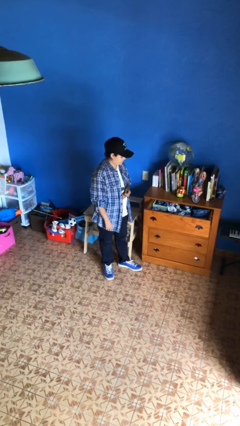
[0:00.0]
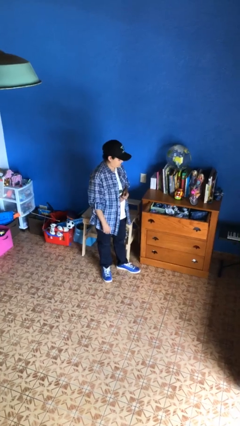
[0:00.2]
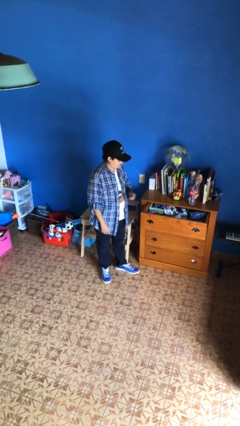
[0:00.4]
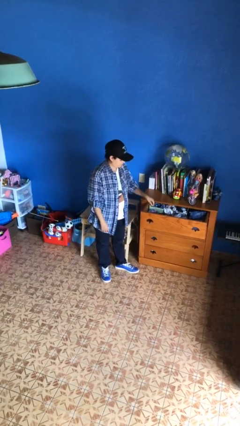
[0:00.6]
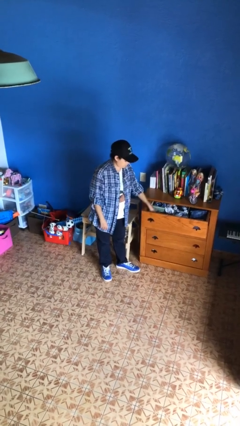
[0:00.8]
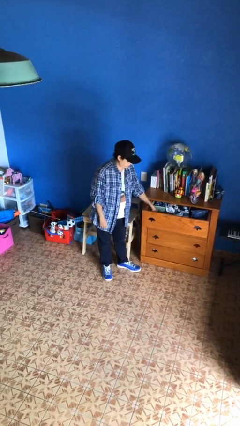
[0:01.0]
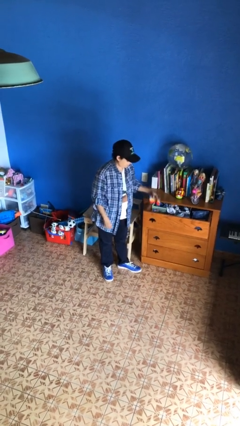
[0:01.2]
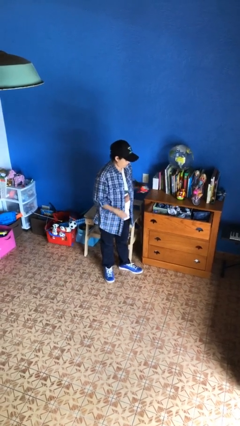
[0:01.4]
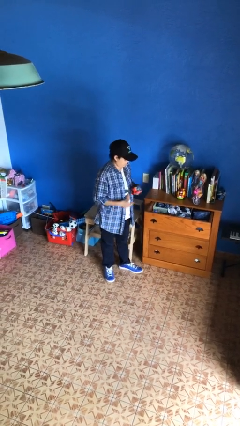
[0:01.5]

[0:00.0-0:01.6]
person takes clothes from dresser

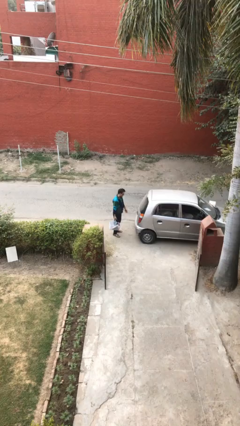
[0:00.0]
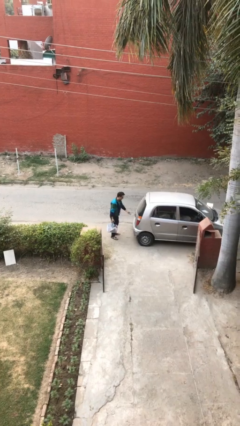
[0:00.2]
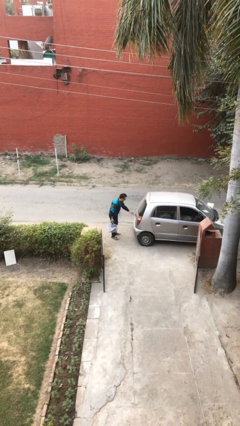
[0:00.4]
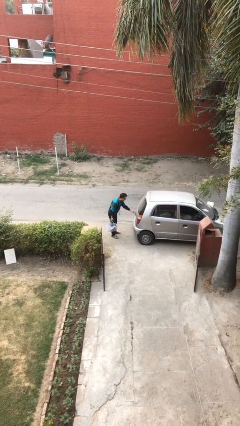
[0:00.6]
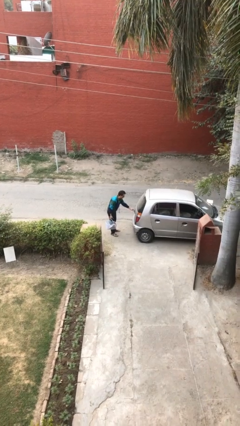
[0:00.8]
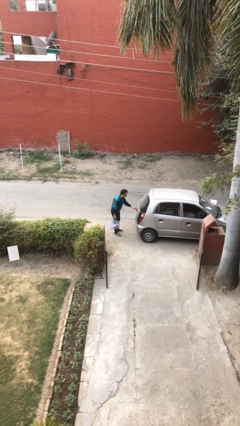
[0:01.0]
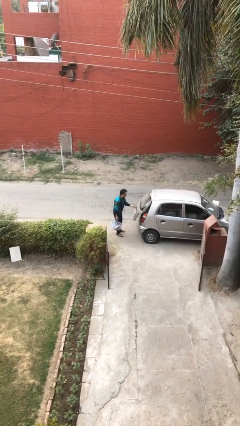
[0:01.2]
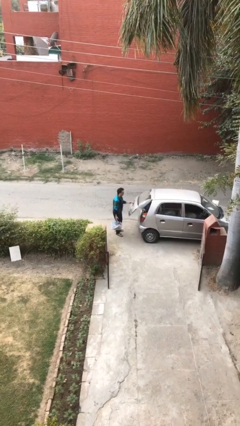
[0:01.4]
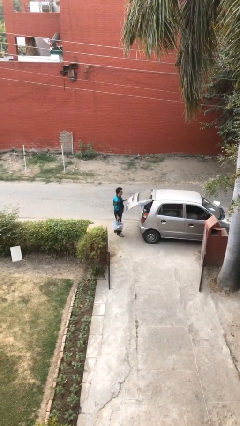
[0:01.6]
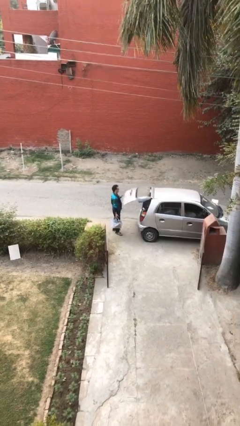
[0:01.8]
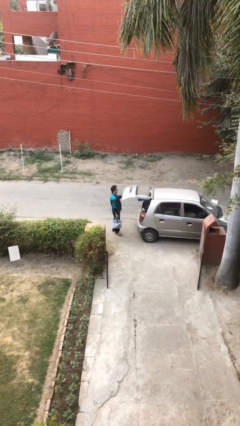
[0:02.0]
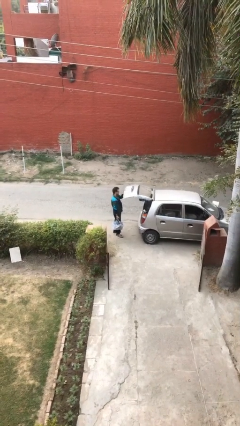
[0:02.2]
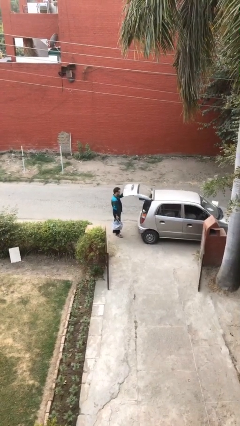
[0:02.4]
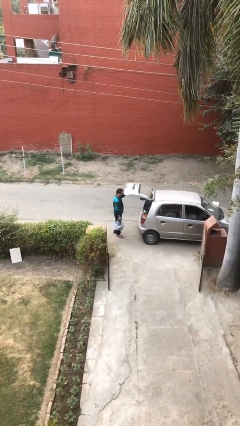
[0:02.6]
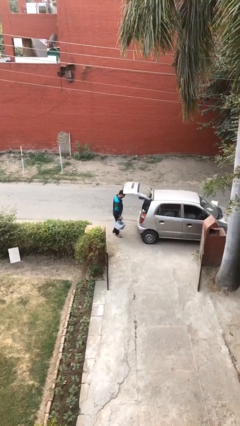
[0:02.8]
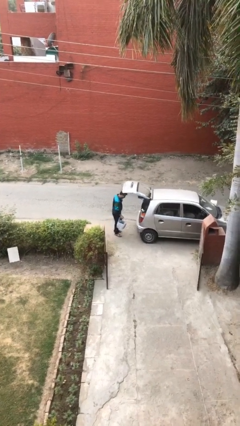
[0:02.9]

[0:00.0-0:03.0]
person opens car trunk

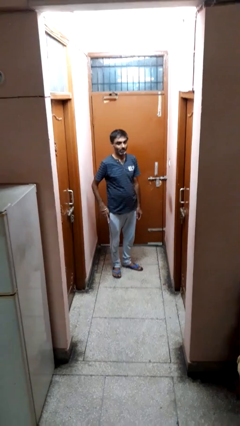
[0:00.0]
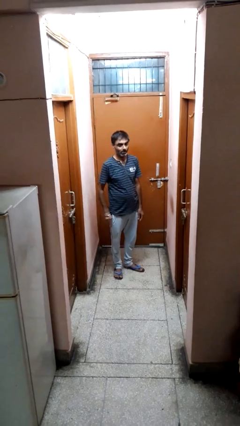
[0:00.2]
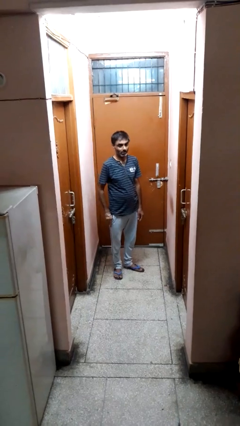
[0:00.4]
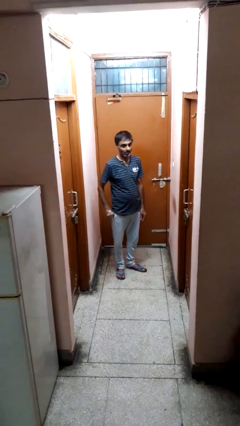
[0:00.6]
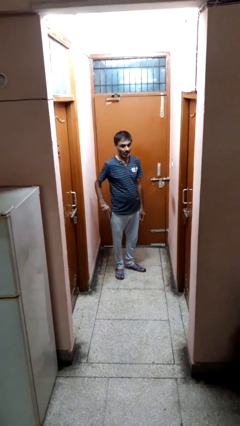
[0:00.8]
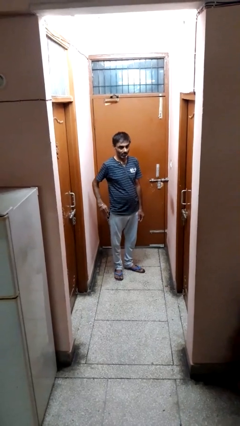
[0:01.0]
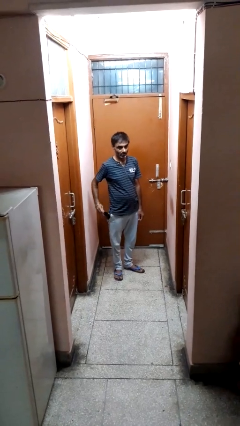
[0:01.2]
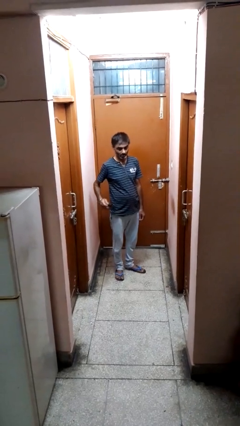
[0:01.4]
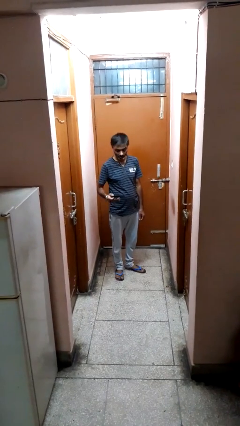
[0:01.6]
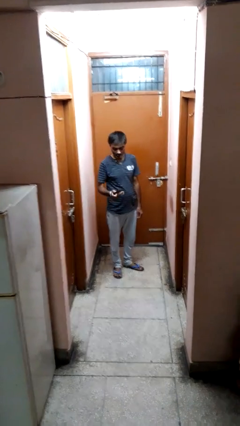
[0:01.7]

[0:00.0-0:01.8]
person takes phone from pocket

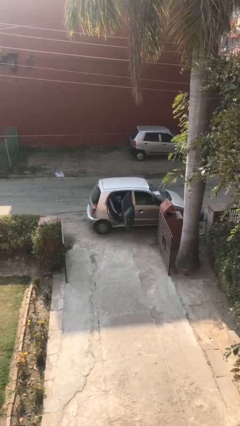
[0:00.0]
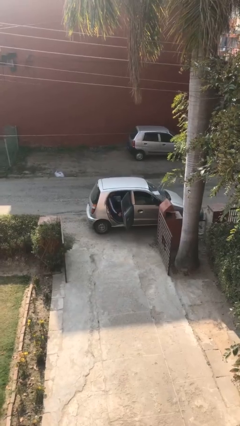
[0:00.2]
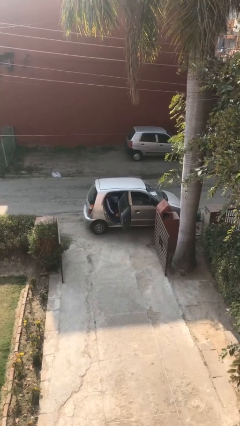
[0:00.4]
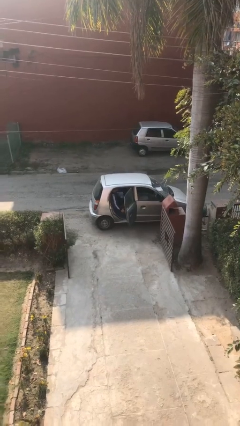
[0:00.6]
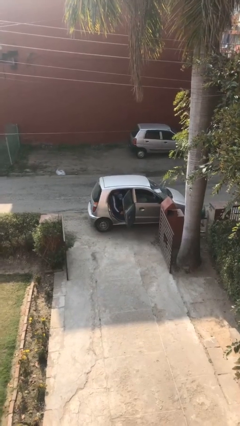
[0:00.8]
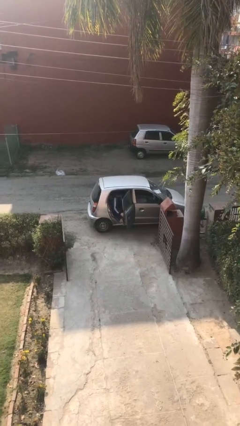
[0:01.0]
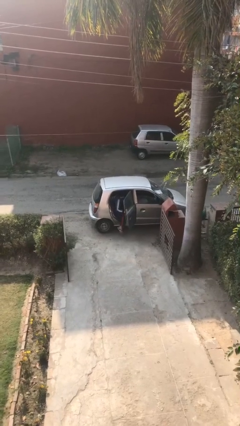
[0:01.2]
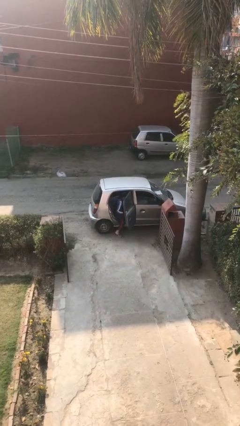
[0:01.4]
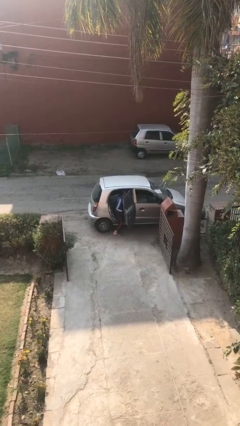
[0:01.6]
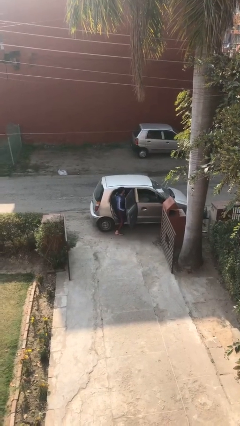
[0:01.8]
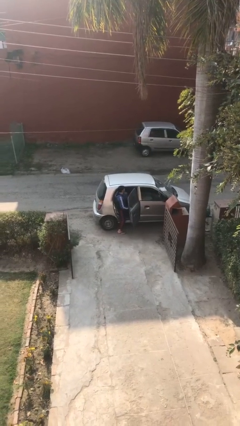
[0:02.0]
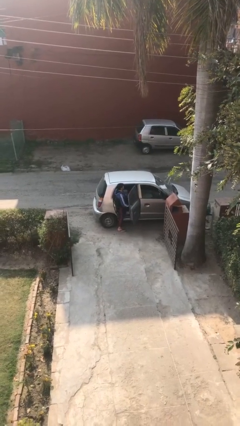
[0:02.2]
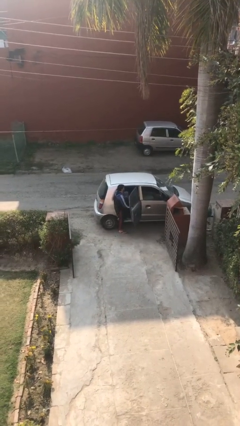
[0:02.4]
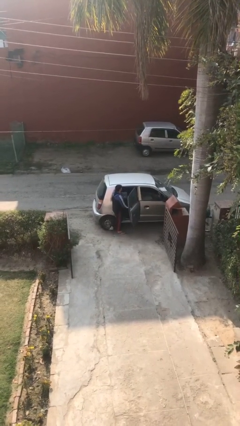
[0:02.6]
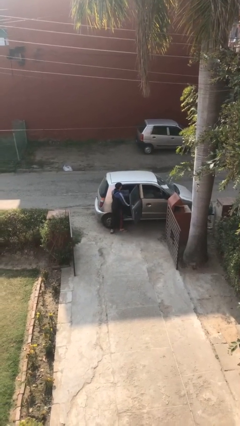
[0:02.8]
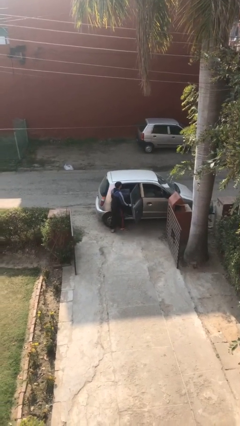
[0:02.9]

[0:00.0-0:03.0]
person exits car

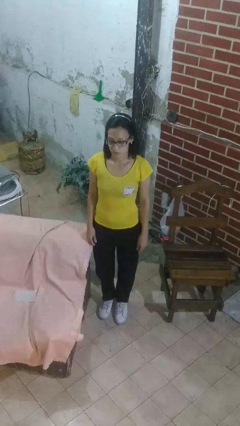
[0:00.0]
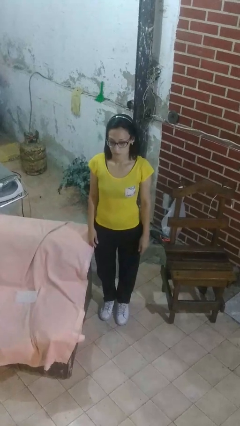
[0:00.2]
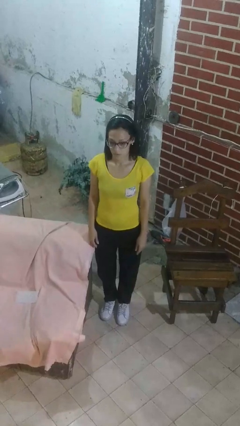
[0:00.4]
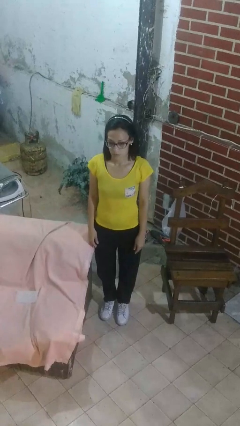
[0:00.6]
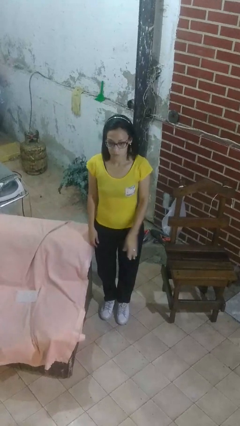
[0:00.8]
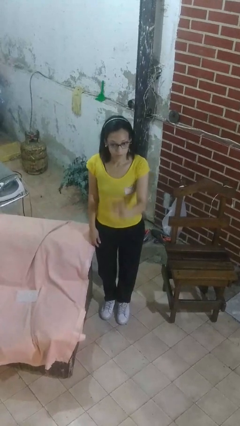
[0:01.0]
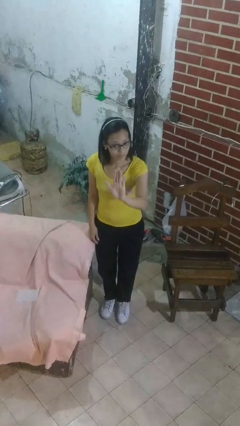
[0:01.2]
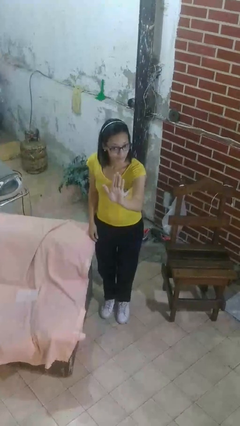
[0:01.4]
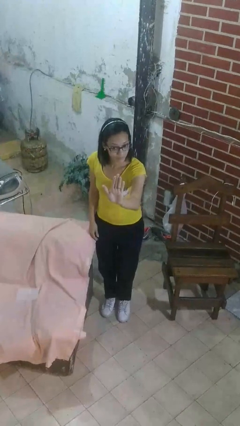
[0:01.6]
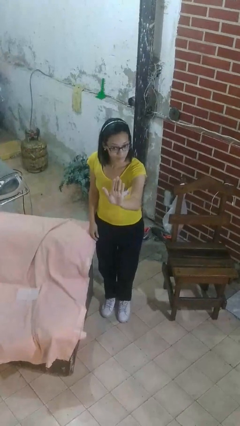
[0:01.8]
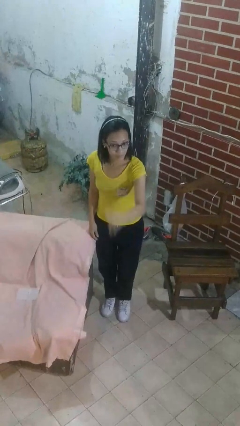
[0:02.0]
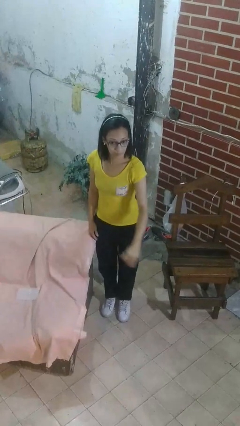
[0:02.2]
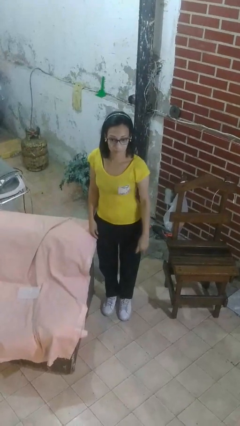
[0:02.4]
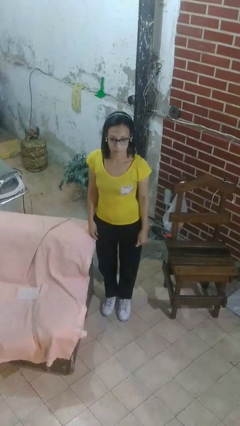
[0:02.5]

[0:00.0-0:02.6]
person gestures stop

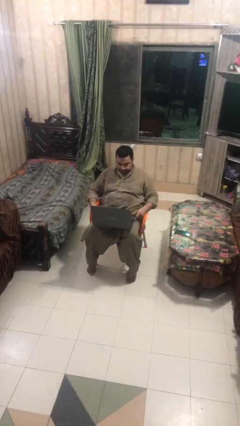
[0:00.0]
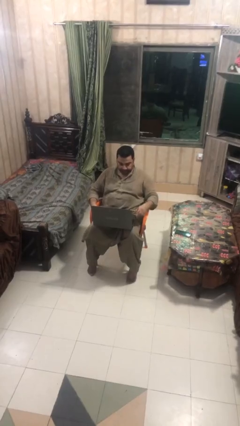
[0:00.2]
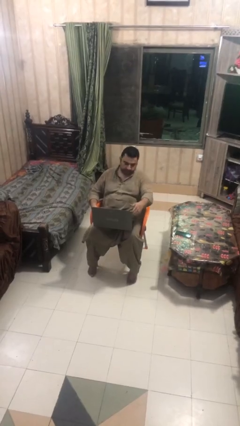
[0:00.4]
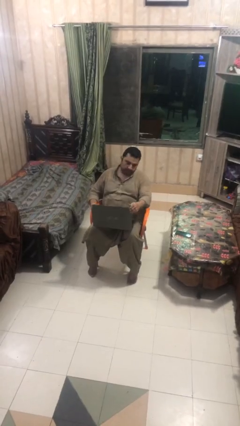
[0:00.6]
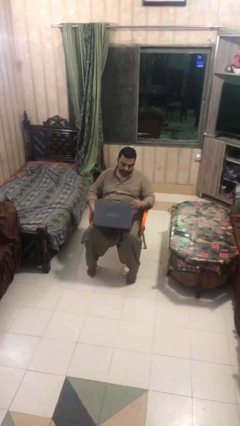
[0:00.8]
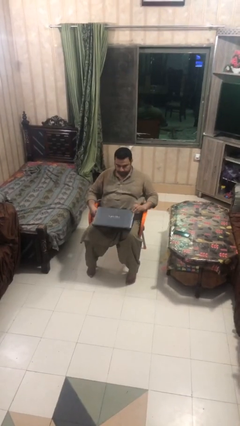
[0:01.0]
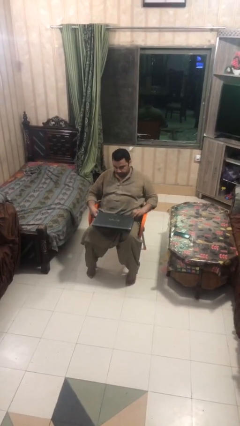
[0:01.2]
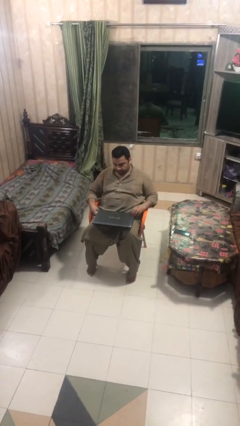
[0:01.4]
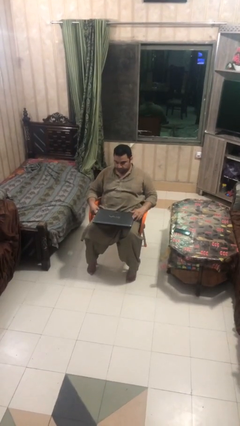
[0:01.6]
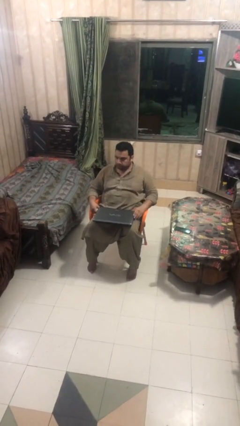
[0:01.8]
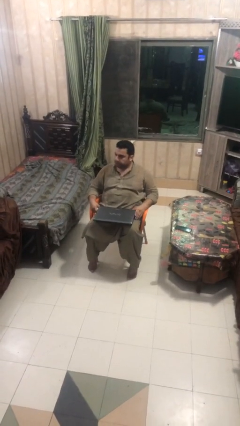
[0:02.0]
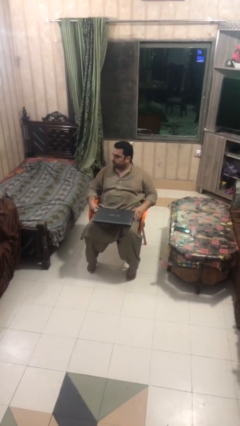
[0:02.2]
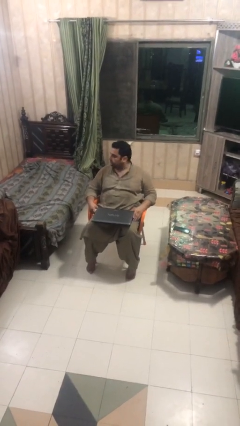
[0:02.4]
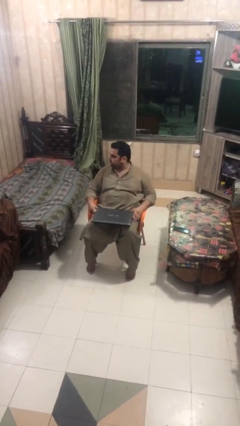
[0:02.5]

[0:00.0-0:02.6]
person closes laptop

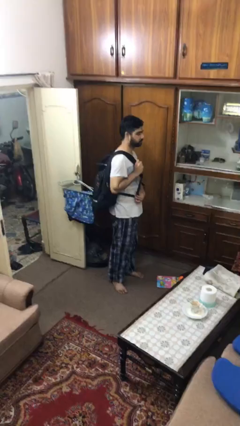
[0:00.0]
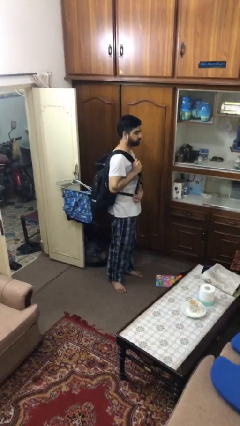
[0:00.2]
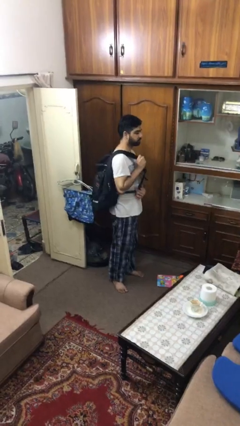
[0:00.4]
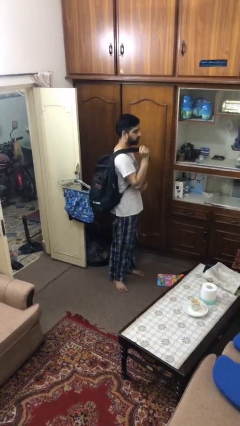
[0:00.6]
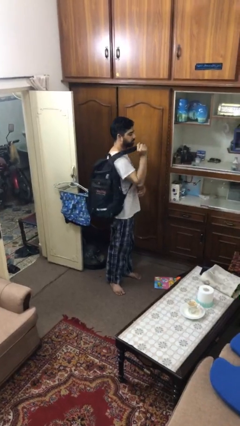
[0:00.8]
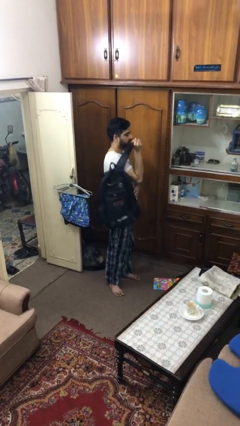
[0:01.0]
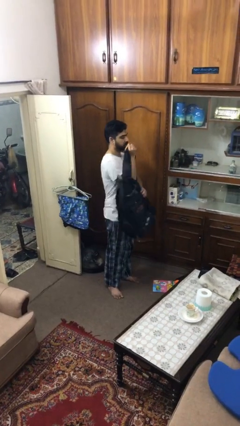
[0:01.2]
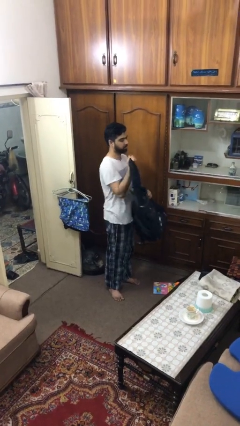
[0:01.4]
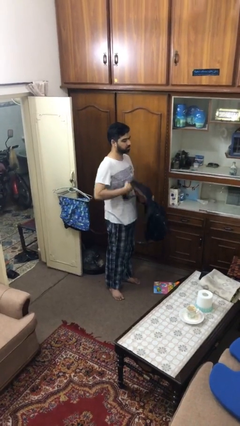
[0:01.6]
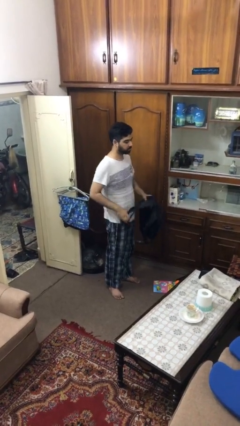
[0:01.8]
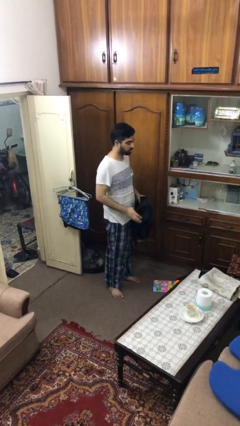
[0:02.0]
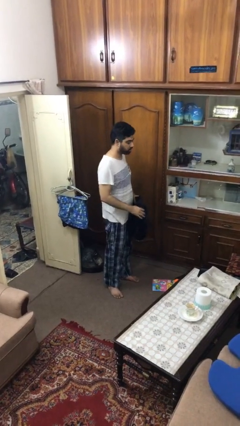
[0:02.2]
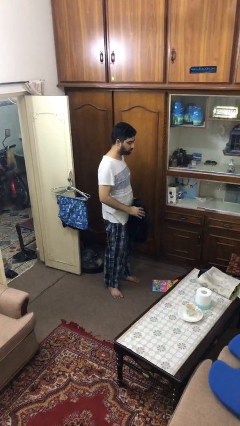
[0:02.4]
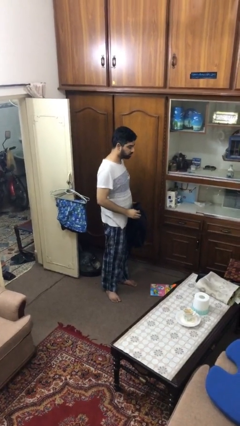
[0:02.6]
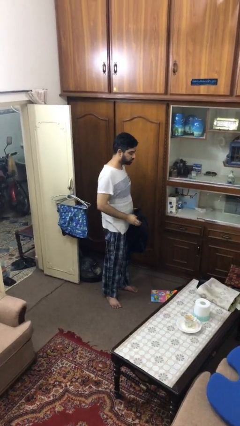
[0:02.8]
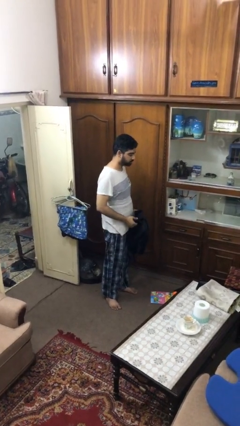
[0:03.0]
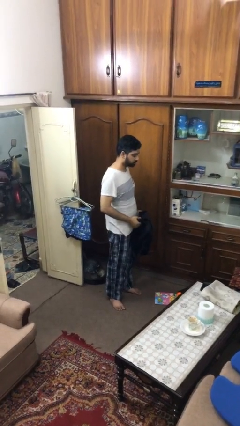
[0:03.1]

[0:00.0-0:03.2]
person takes off backpack
